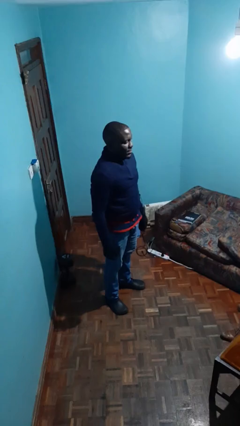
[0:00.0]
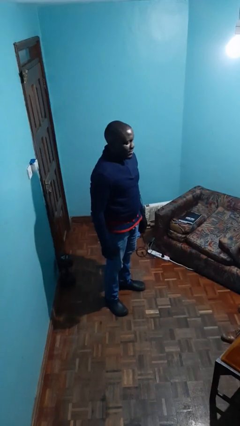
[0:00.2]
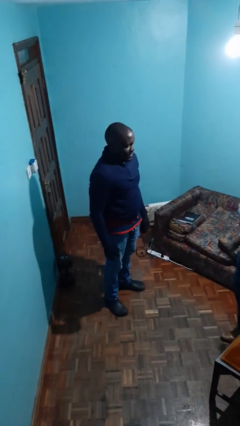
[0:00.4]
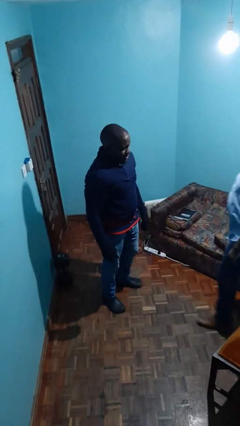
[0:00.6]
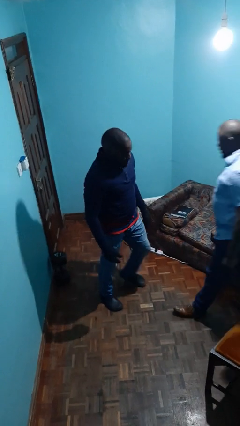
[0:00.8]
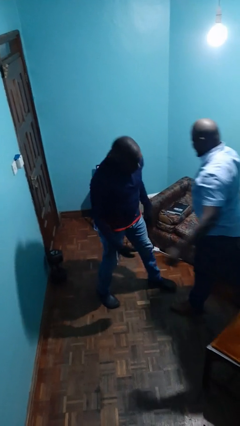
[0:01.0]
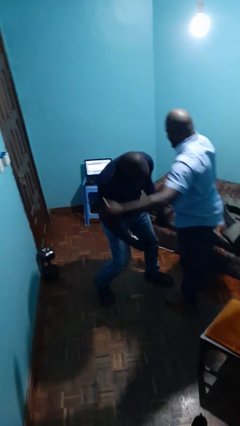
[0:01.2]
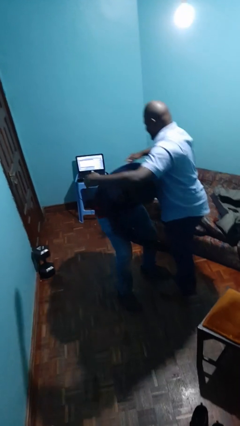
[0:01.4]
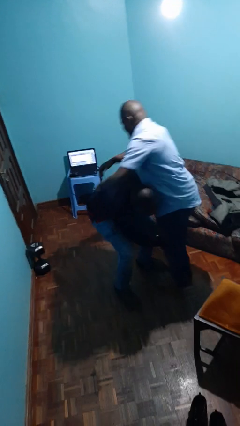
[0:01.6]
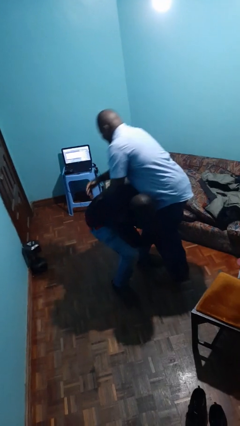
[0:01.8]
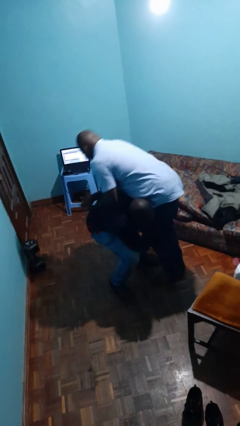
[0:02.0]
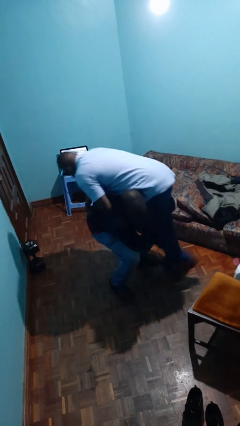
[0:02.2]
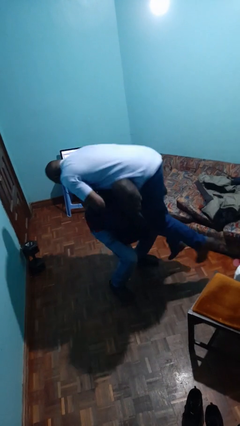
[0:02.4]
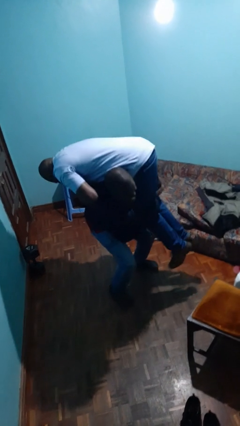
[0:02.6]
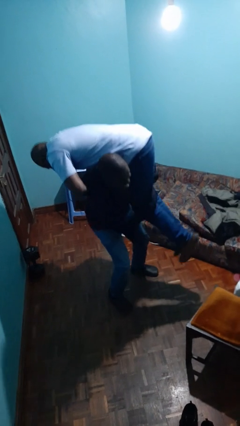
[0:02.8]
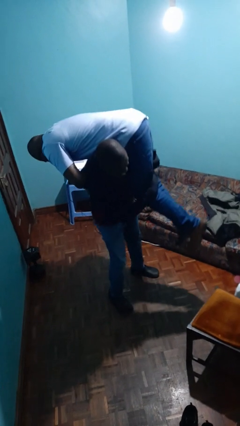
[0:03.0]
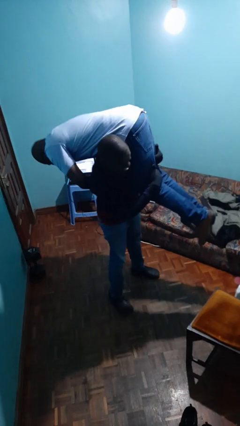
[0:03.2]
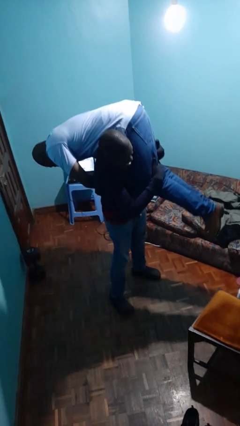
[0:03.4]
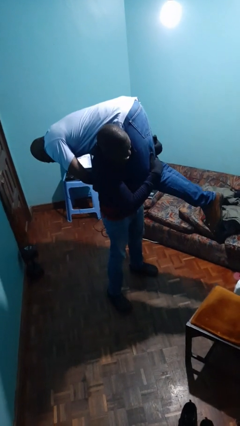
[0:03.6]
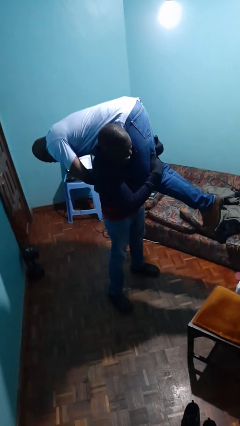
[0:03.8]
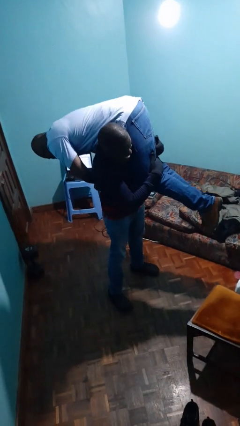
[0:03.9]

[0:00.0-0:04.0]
person carries person over shoulder

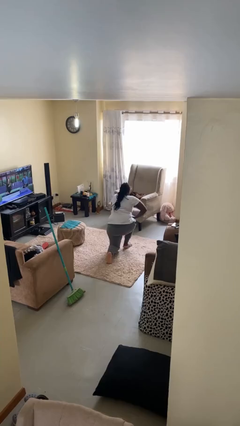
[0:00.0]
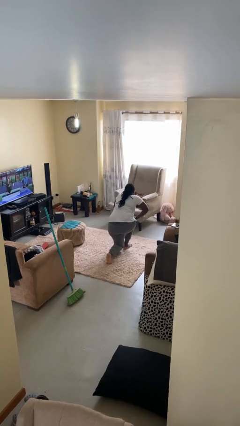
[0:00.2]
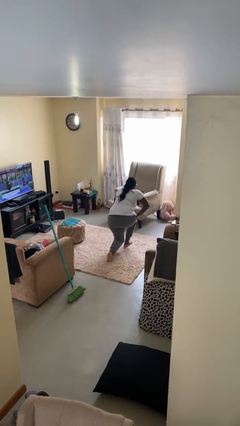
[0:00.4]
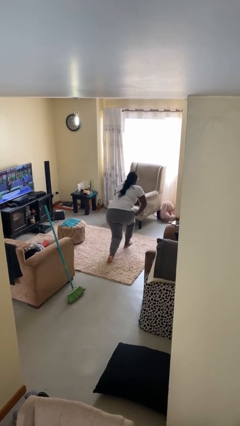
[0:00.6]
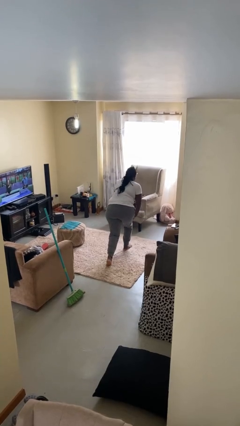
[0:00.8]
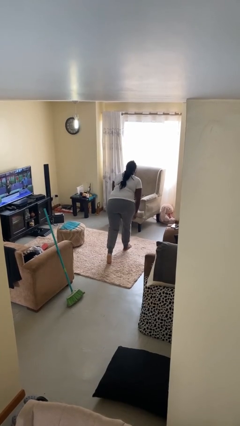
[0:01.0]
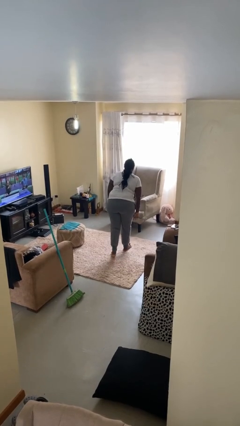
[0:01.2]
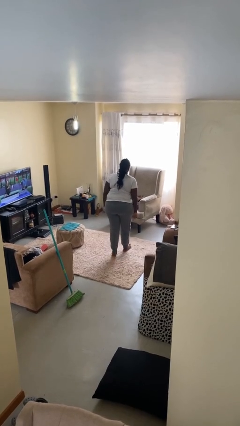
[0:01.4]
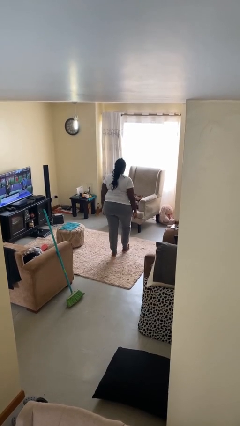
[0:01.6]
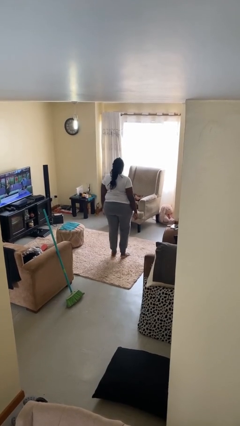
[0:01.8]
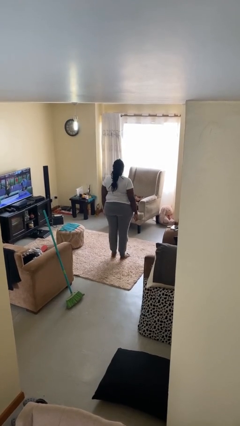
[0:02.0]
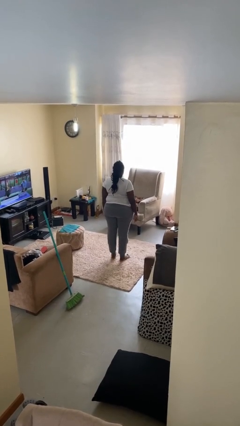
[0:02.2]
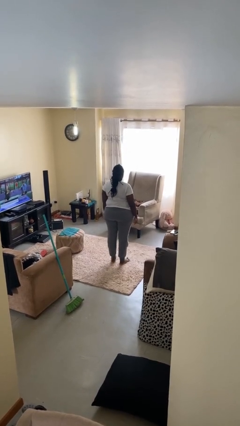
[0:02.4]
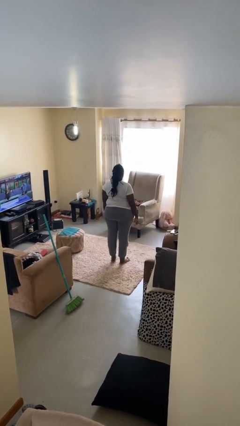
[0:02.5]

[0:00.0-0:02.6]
person stands up from floor

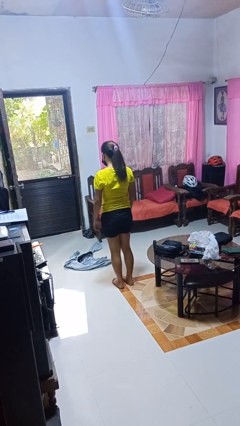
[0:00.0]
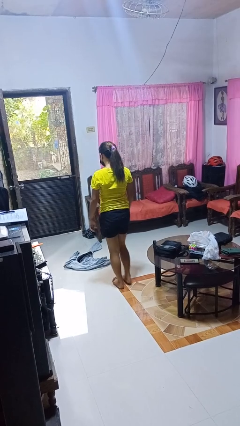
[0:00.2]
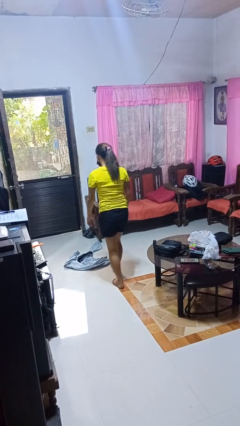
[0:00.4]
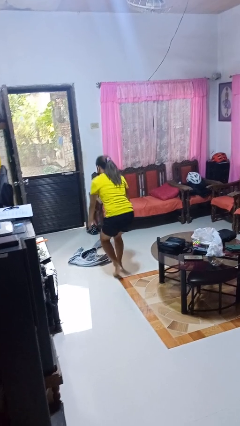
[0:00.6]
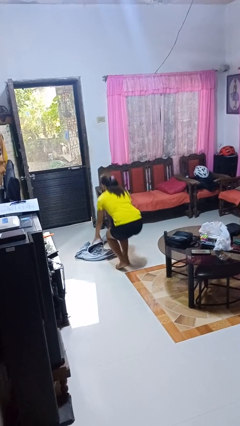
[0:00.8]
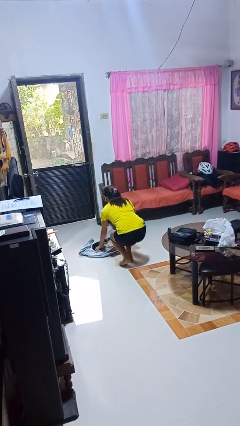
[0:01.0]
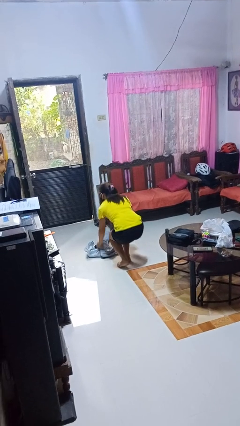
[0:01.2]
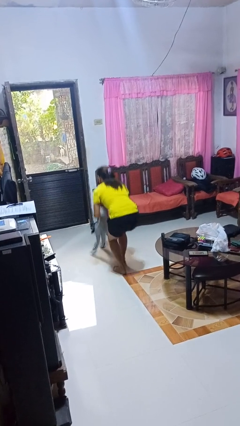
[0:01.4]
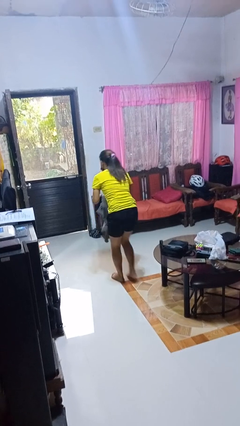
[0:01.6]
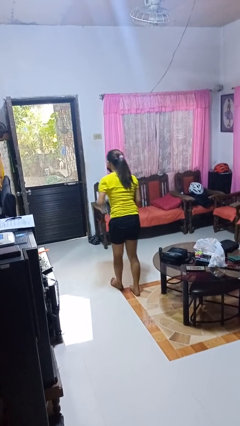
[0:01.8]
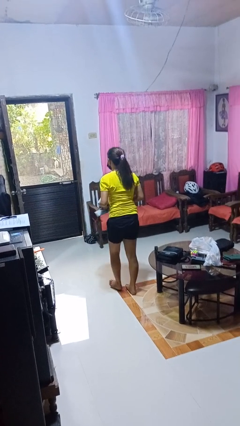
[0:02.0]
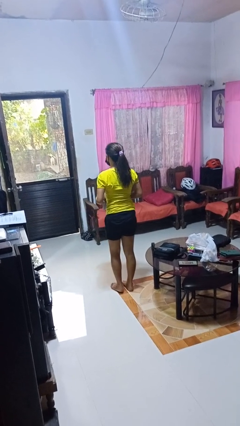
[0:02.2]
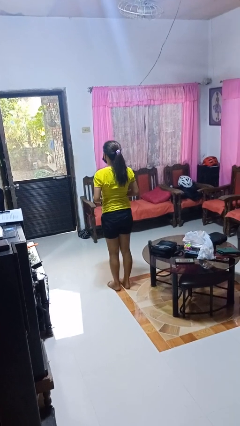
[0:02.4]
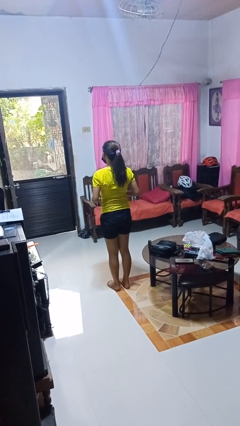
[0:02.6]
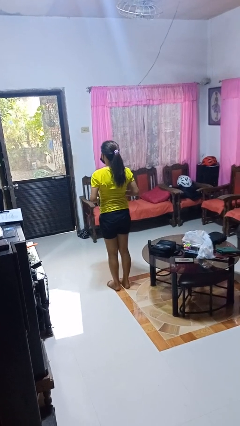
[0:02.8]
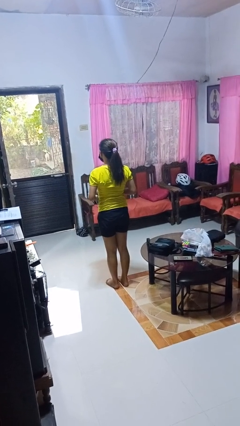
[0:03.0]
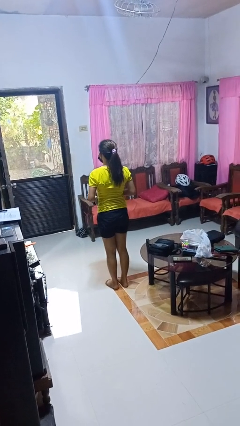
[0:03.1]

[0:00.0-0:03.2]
person picks up object from floor

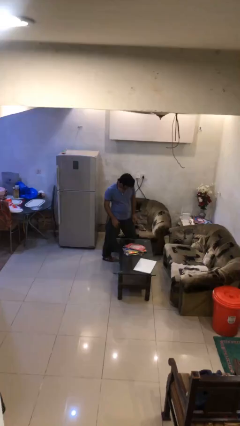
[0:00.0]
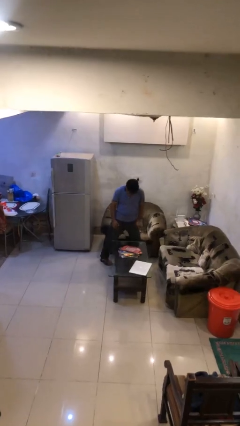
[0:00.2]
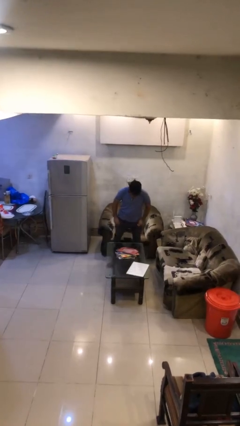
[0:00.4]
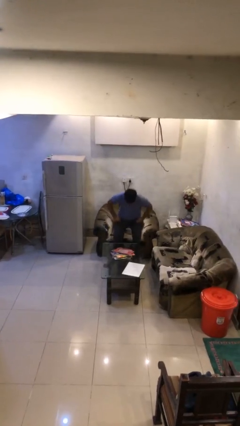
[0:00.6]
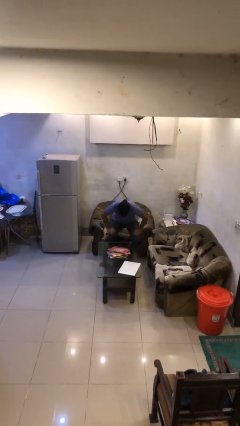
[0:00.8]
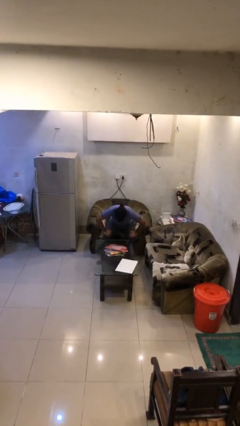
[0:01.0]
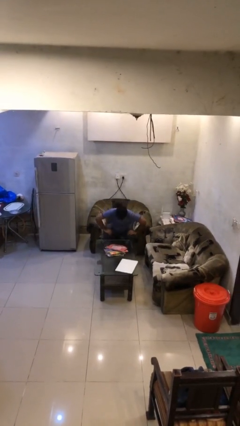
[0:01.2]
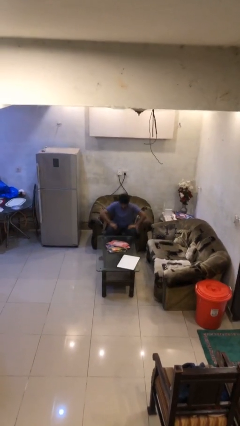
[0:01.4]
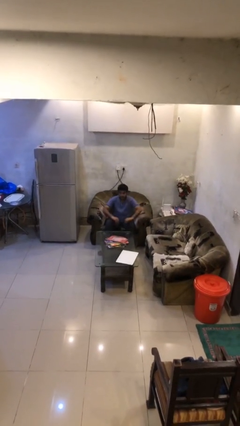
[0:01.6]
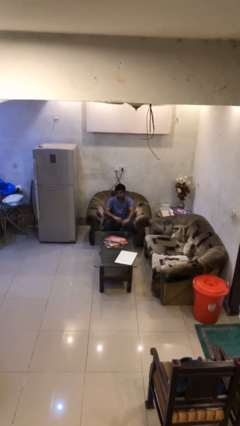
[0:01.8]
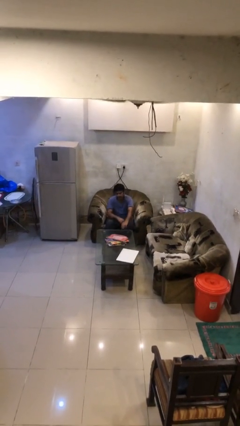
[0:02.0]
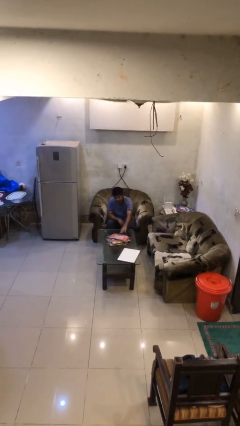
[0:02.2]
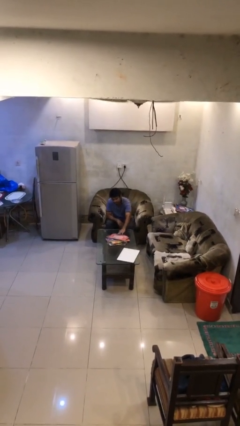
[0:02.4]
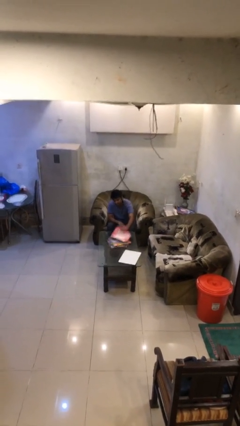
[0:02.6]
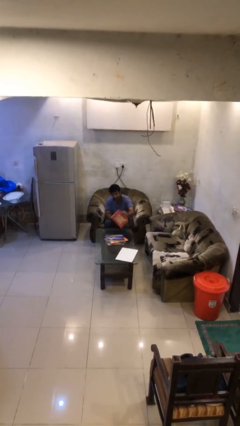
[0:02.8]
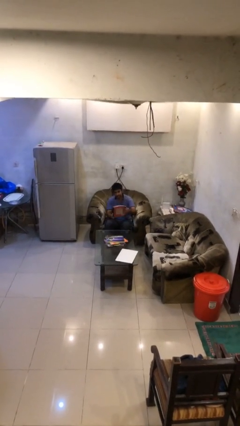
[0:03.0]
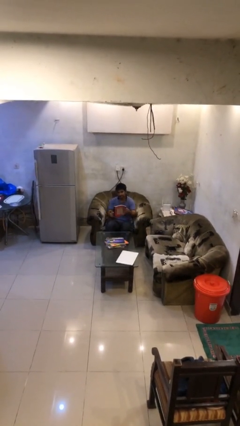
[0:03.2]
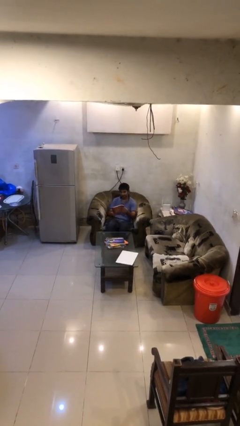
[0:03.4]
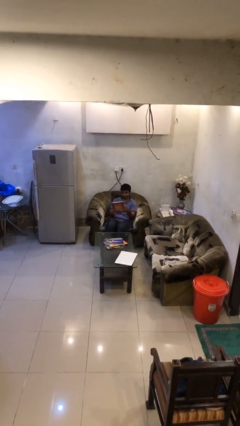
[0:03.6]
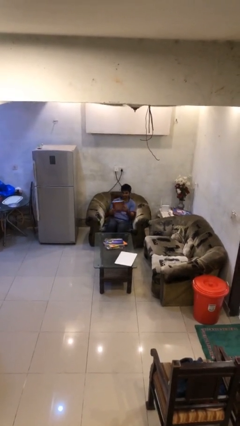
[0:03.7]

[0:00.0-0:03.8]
person sits down

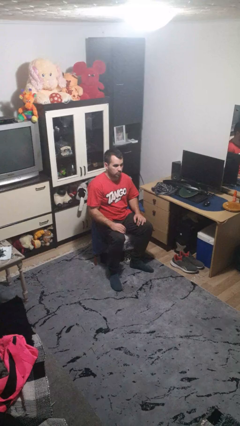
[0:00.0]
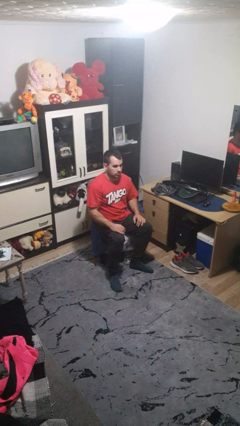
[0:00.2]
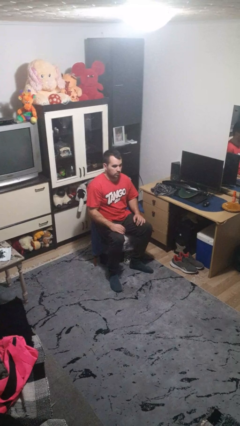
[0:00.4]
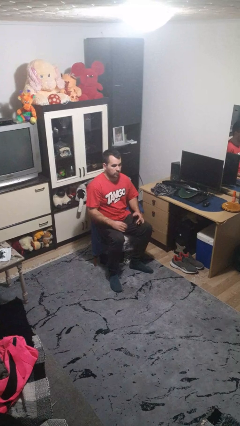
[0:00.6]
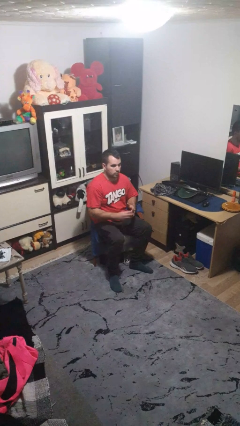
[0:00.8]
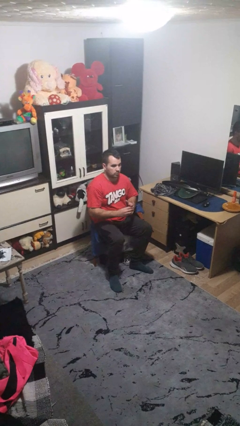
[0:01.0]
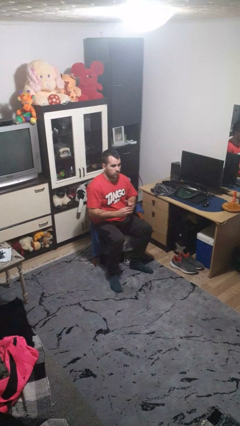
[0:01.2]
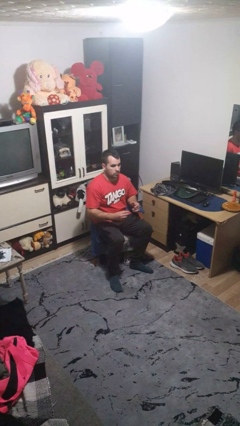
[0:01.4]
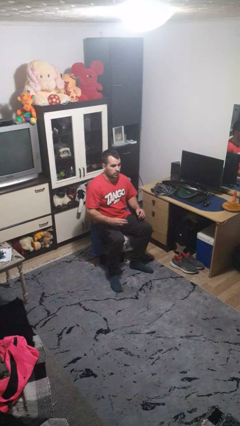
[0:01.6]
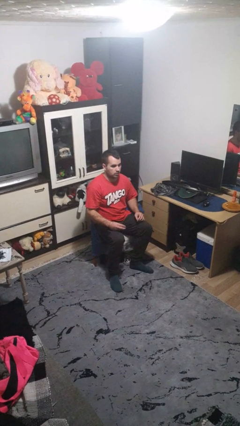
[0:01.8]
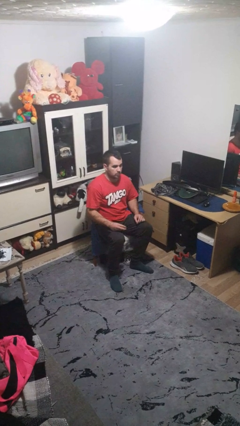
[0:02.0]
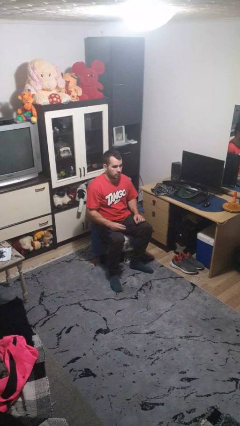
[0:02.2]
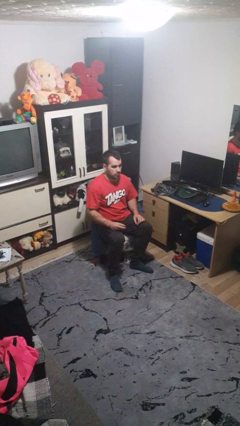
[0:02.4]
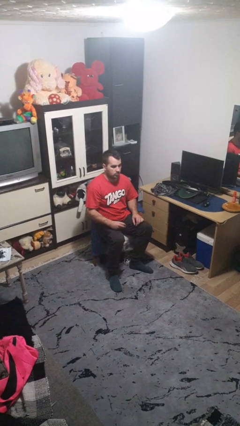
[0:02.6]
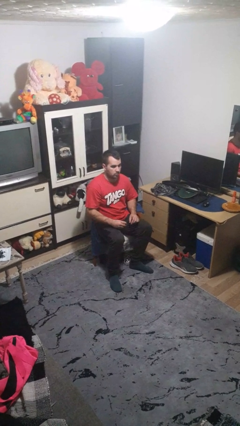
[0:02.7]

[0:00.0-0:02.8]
person takes off ring

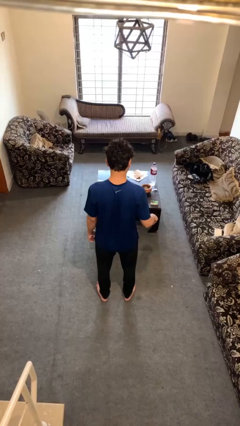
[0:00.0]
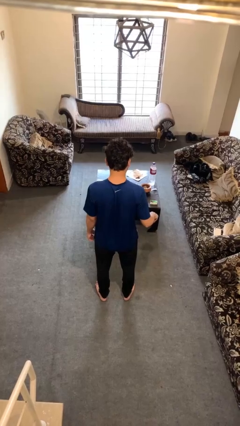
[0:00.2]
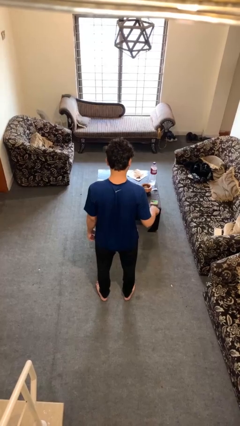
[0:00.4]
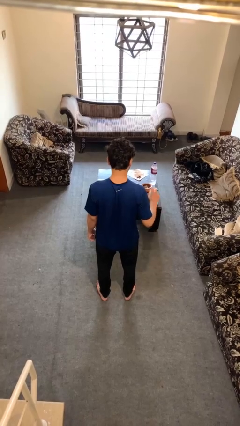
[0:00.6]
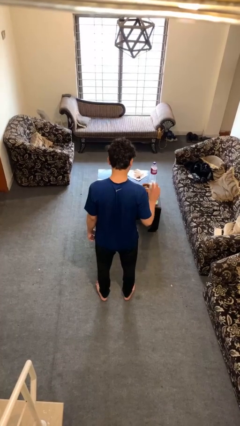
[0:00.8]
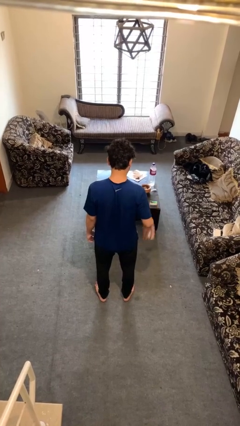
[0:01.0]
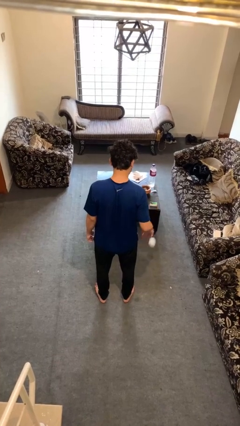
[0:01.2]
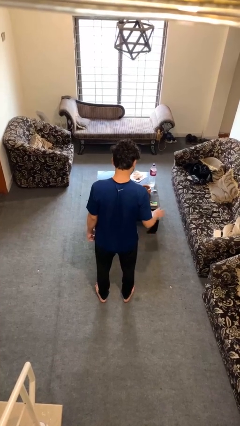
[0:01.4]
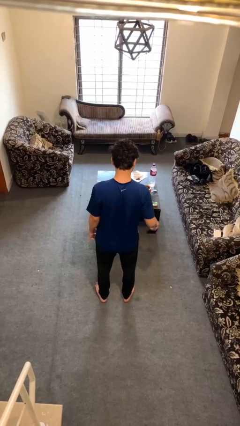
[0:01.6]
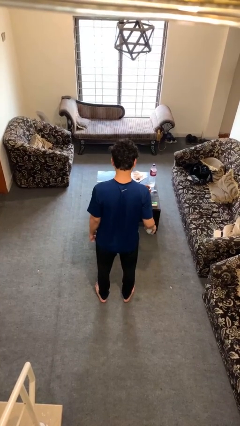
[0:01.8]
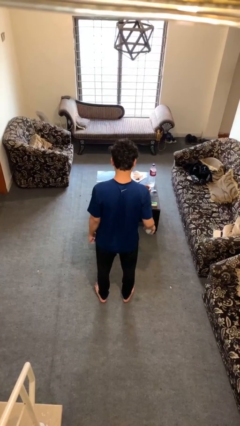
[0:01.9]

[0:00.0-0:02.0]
person bounces ball on floor
